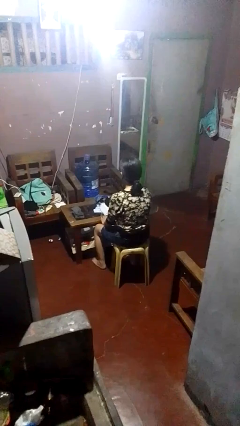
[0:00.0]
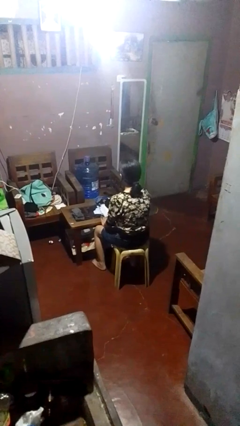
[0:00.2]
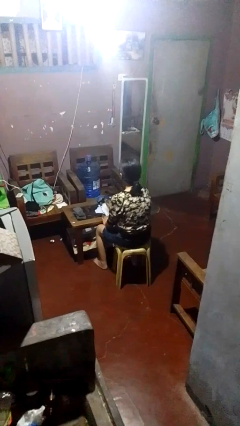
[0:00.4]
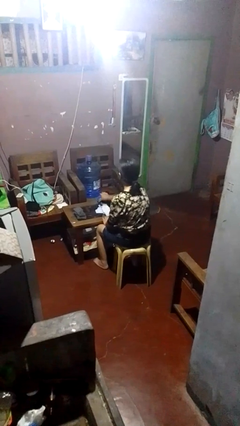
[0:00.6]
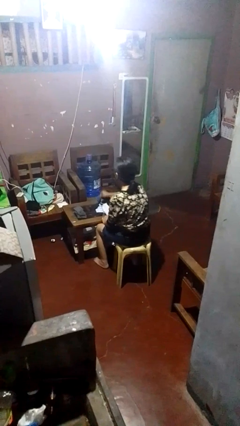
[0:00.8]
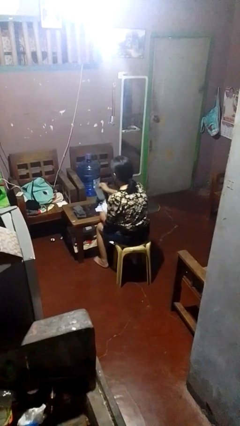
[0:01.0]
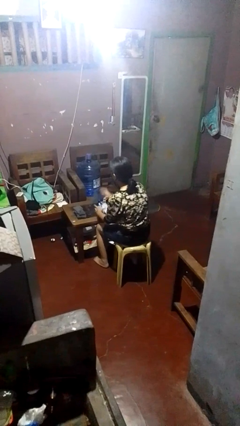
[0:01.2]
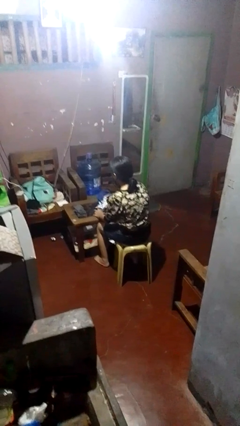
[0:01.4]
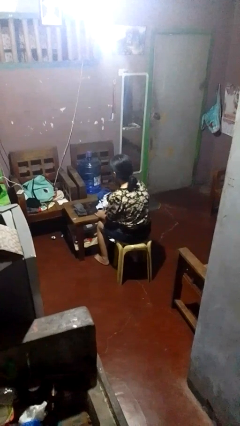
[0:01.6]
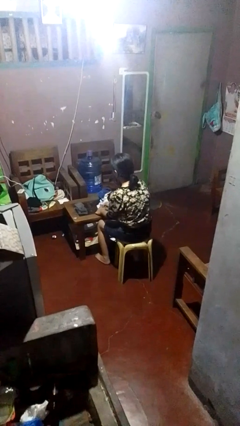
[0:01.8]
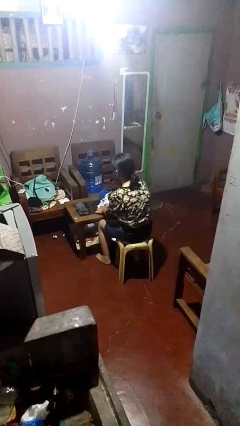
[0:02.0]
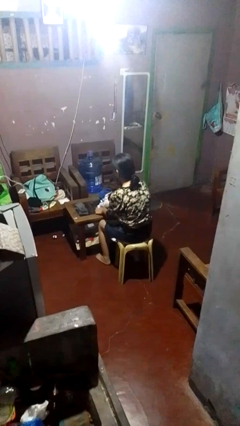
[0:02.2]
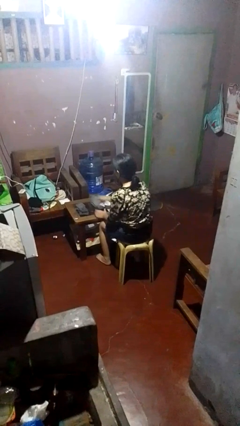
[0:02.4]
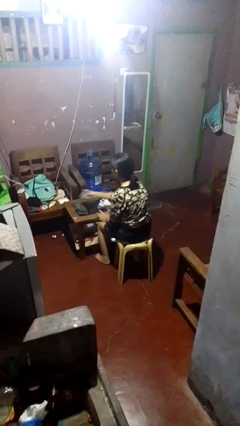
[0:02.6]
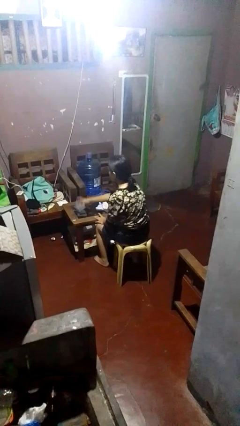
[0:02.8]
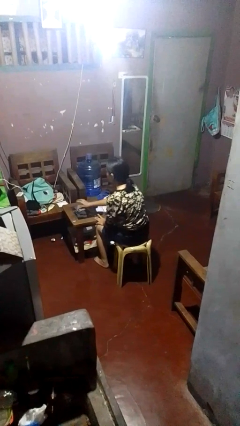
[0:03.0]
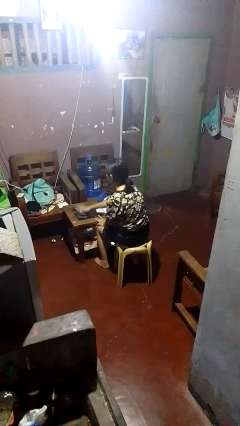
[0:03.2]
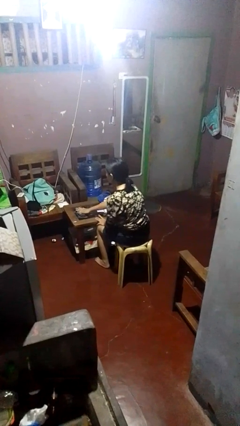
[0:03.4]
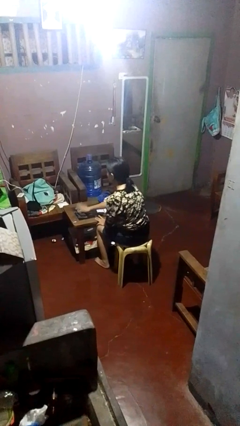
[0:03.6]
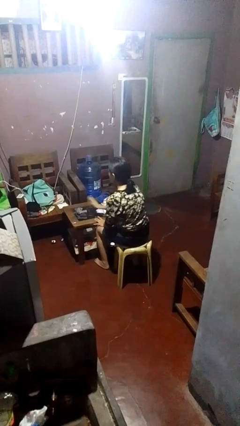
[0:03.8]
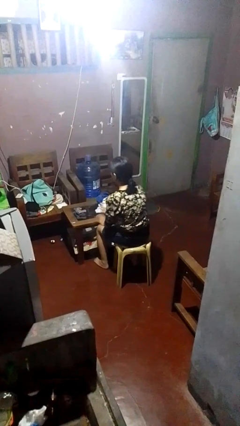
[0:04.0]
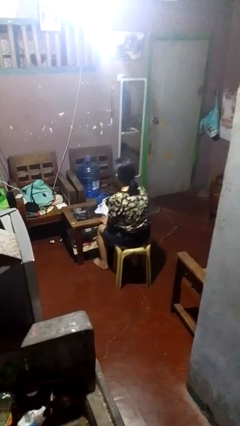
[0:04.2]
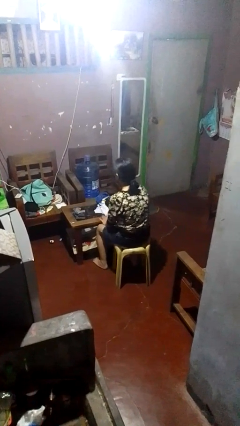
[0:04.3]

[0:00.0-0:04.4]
person folds socks

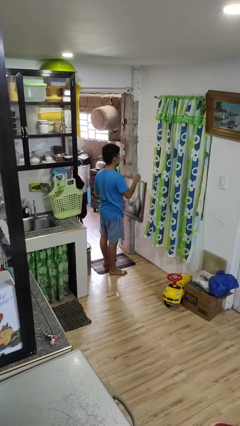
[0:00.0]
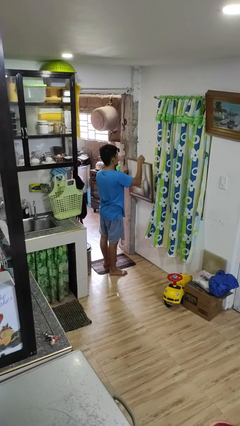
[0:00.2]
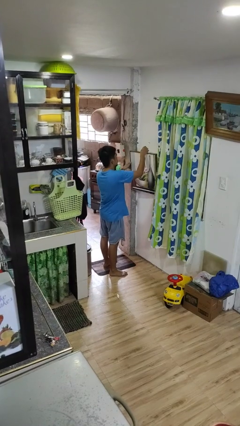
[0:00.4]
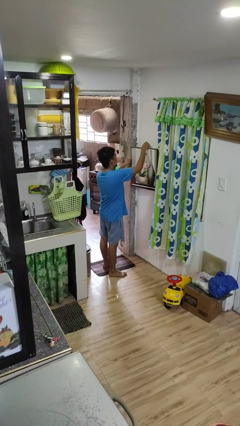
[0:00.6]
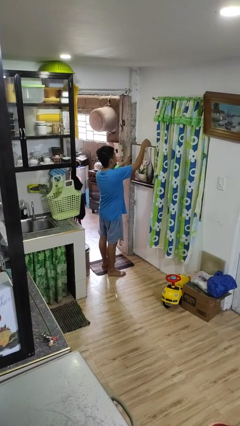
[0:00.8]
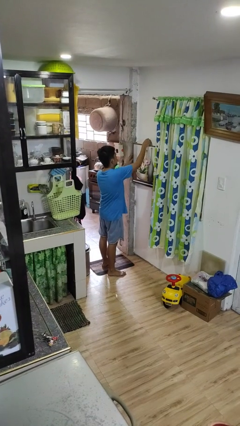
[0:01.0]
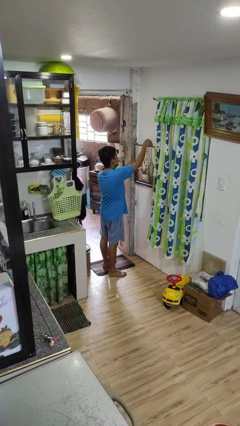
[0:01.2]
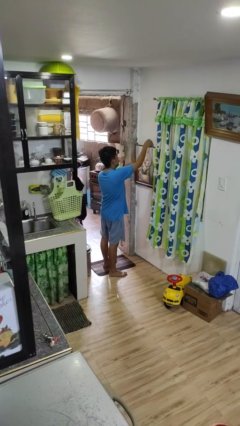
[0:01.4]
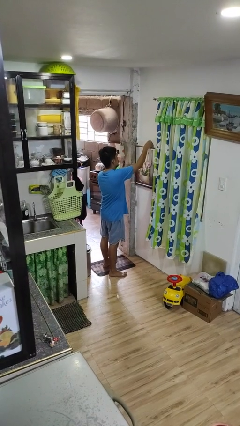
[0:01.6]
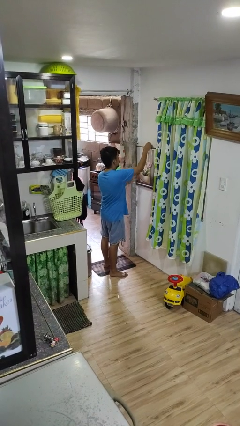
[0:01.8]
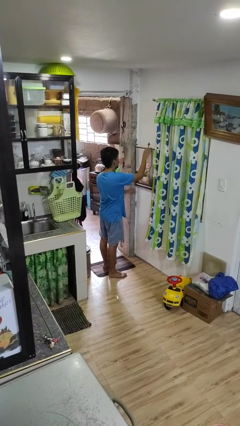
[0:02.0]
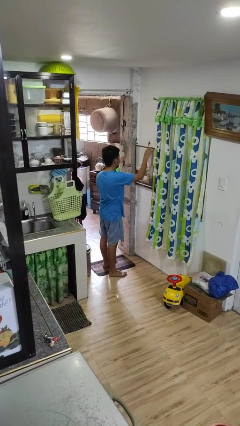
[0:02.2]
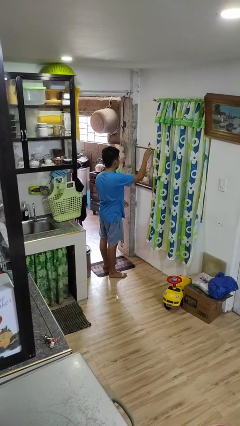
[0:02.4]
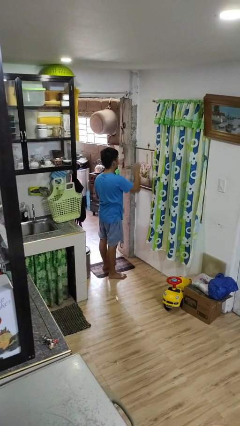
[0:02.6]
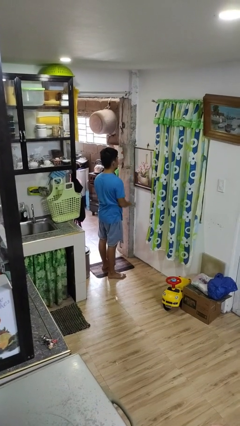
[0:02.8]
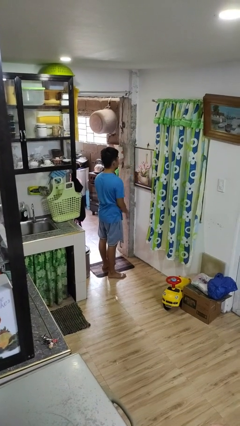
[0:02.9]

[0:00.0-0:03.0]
person puts up picture frame

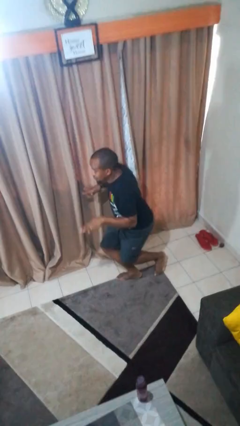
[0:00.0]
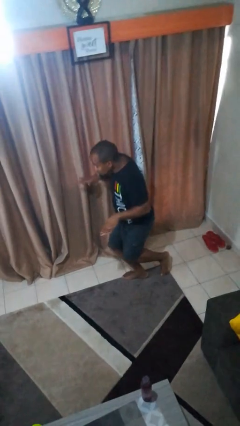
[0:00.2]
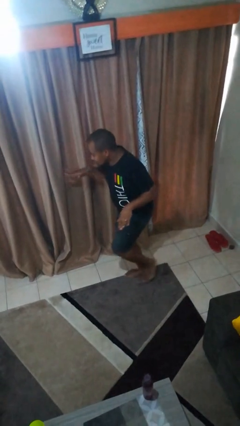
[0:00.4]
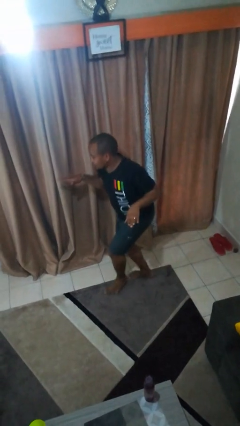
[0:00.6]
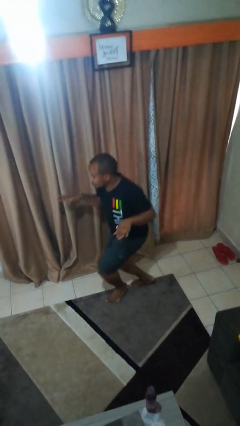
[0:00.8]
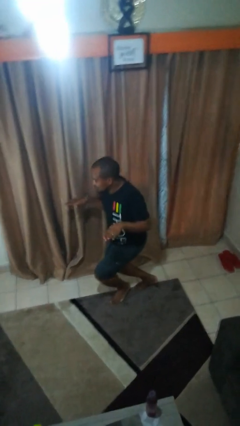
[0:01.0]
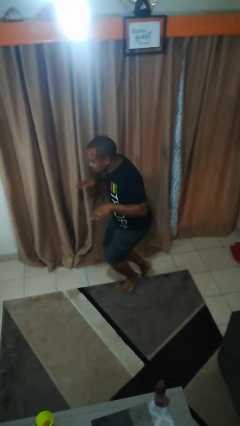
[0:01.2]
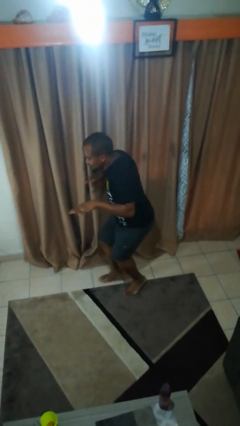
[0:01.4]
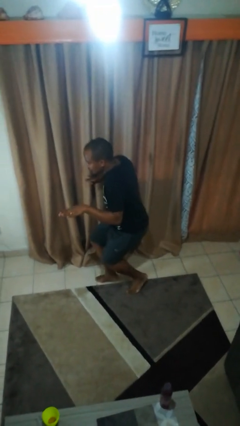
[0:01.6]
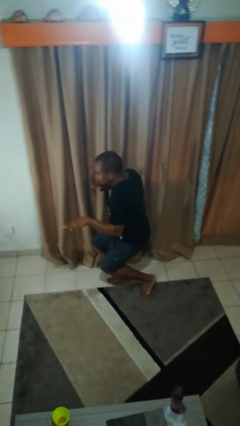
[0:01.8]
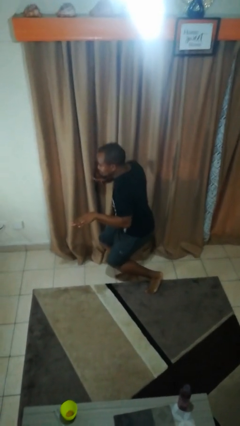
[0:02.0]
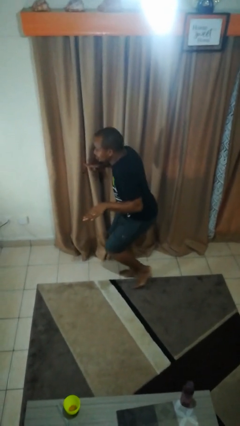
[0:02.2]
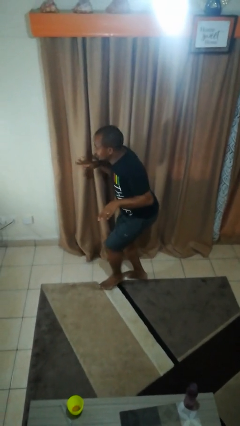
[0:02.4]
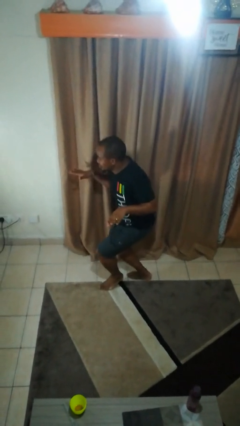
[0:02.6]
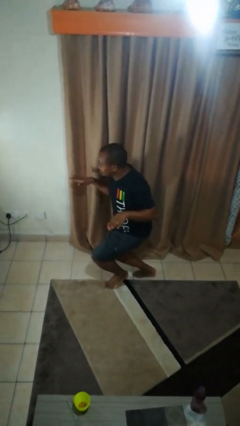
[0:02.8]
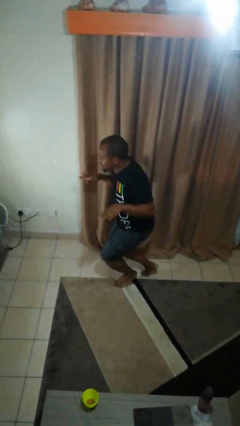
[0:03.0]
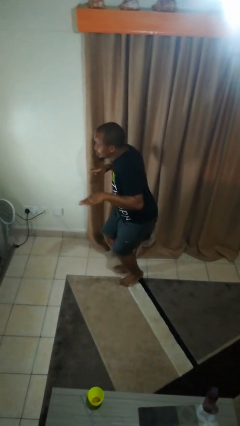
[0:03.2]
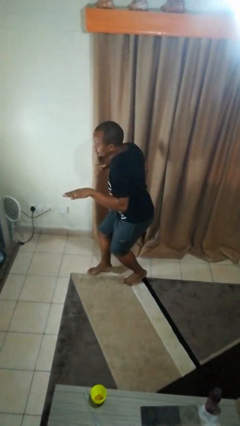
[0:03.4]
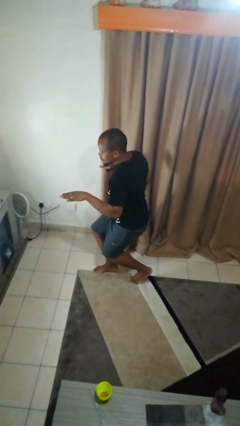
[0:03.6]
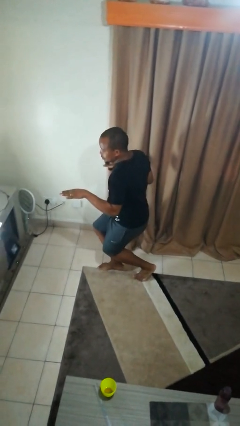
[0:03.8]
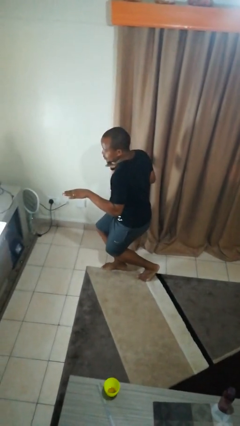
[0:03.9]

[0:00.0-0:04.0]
person walks tiptoe

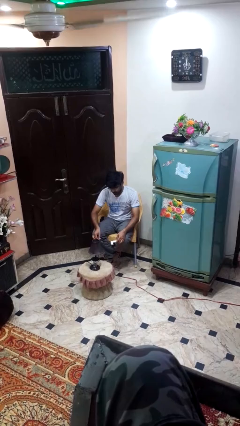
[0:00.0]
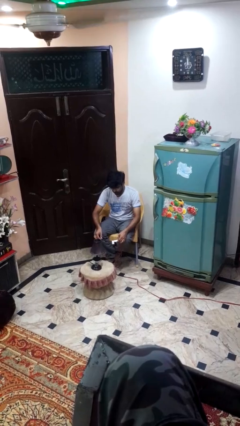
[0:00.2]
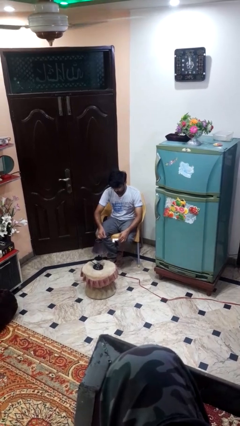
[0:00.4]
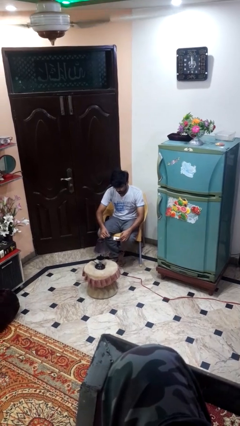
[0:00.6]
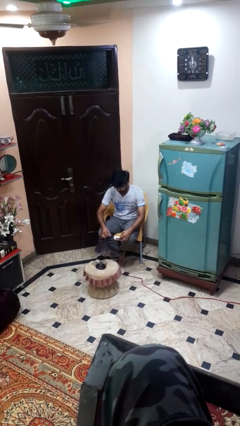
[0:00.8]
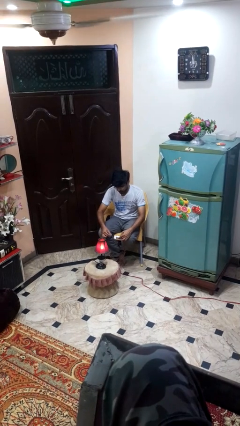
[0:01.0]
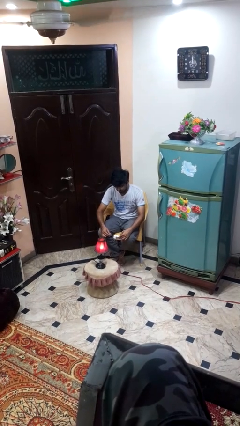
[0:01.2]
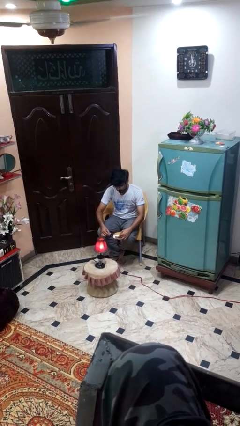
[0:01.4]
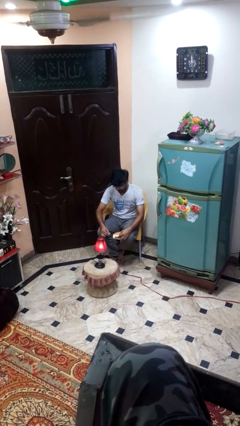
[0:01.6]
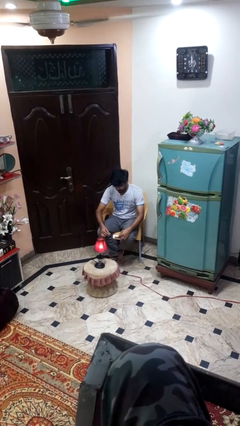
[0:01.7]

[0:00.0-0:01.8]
person turns on lamp

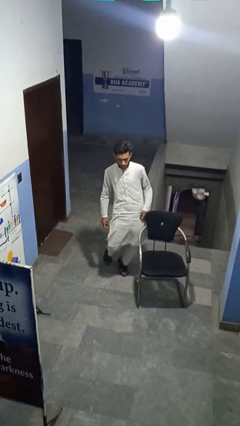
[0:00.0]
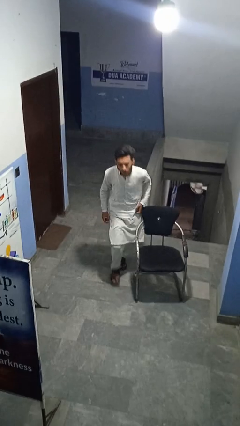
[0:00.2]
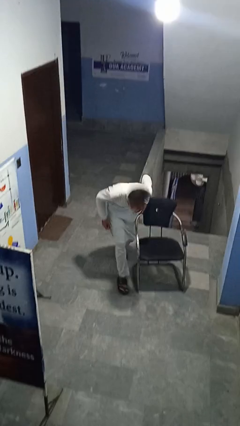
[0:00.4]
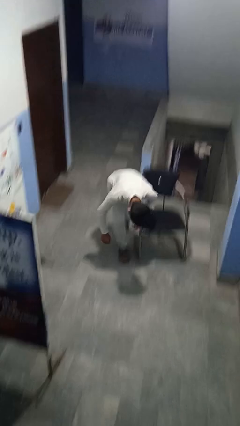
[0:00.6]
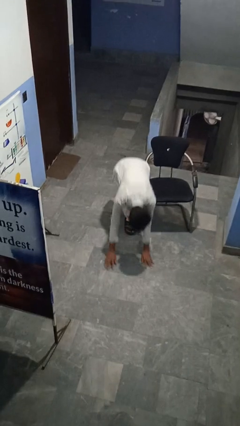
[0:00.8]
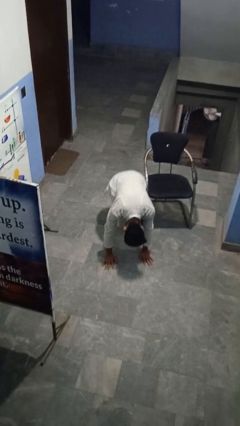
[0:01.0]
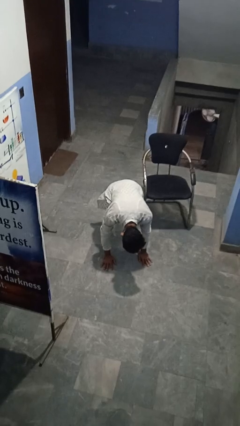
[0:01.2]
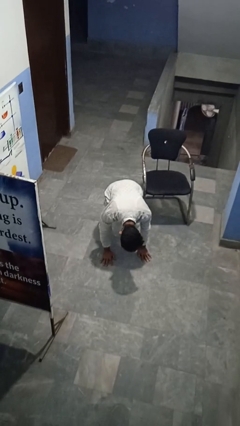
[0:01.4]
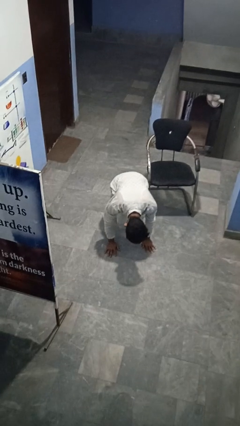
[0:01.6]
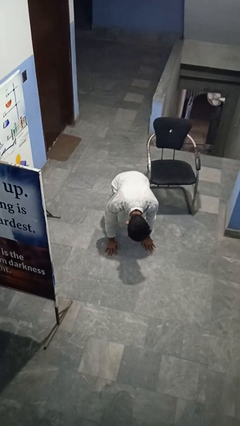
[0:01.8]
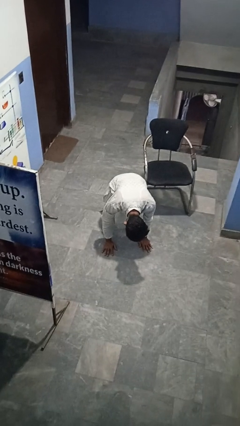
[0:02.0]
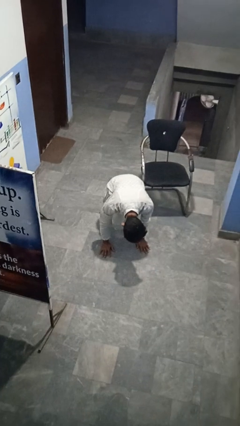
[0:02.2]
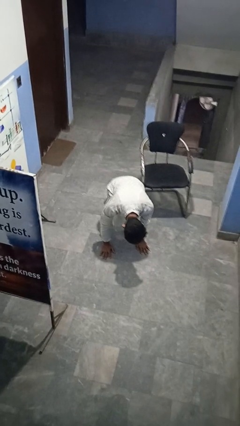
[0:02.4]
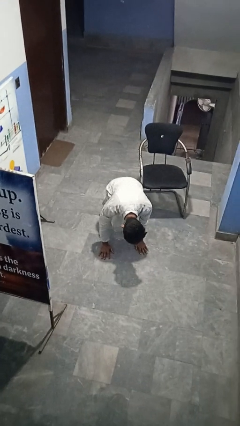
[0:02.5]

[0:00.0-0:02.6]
person trips on object on floor

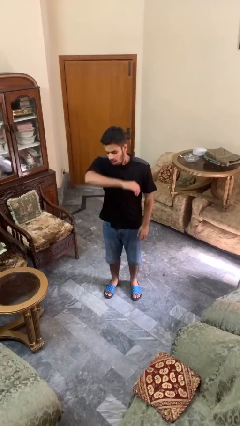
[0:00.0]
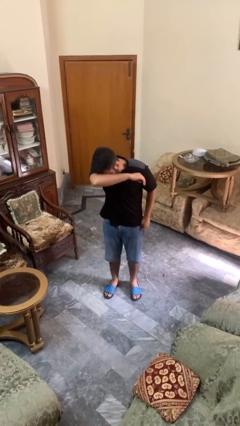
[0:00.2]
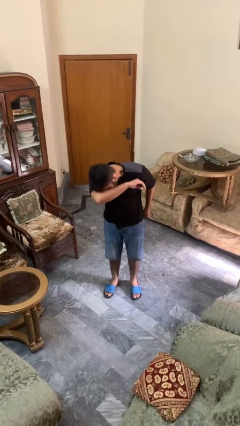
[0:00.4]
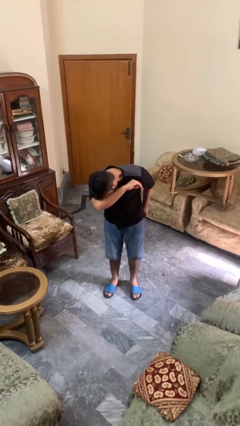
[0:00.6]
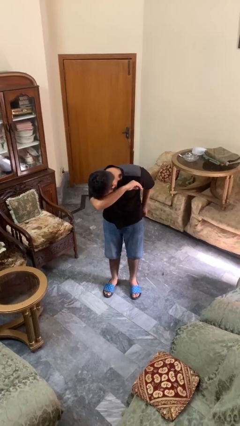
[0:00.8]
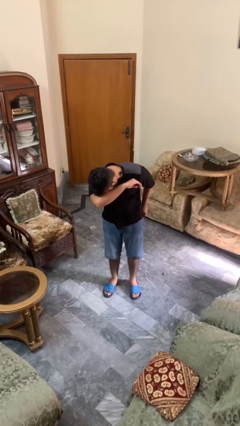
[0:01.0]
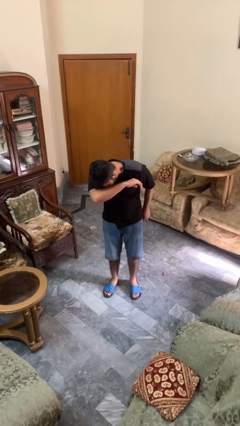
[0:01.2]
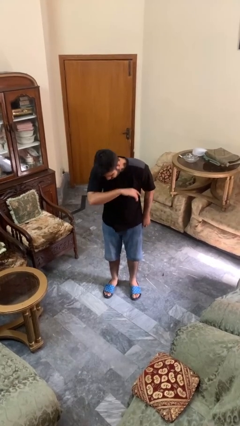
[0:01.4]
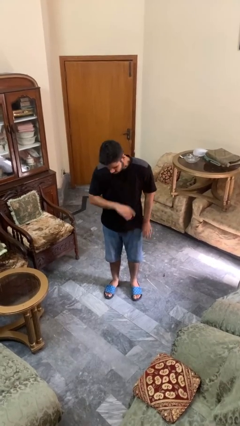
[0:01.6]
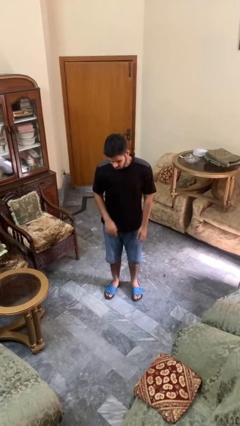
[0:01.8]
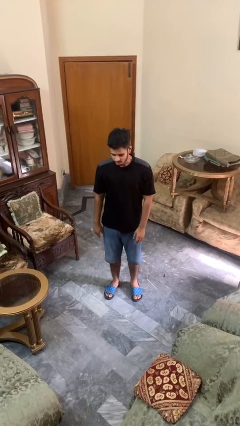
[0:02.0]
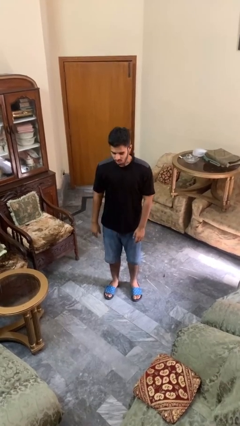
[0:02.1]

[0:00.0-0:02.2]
person sneezes into arm
